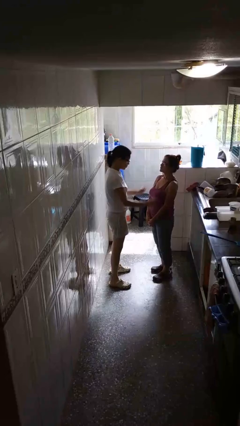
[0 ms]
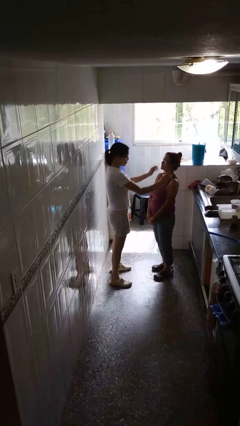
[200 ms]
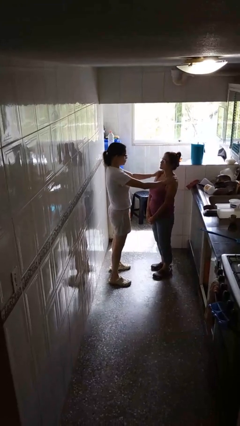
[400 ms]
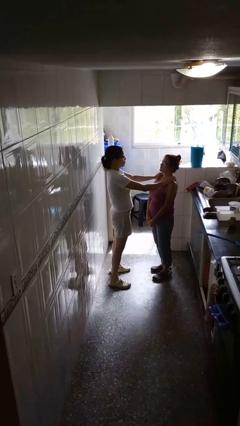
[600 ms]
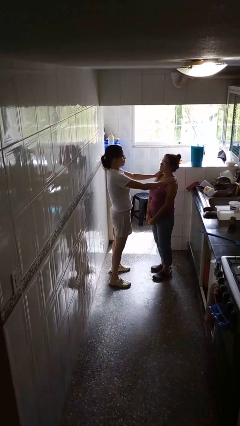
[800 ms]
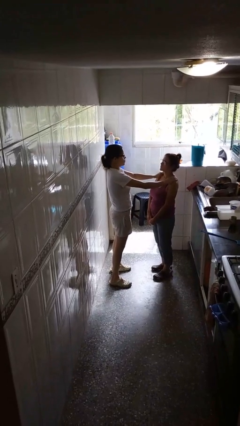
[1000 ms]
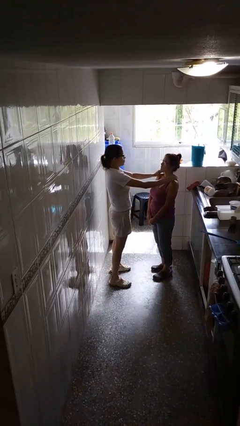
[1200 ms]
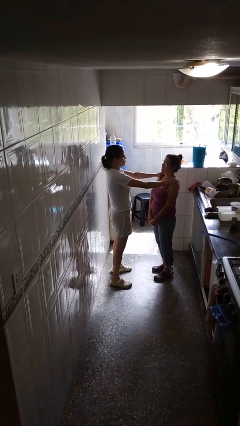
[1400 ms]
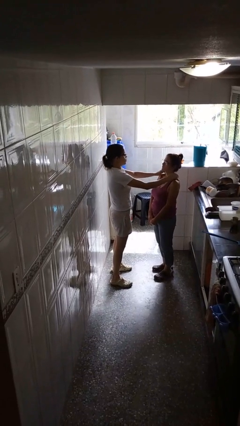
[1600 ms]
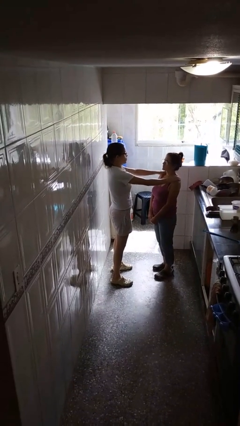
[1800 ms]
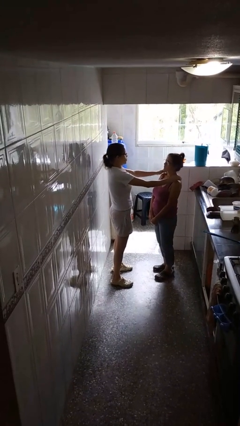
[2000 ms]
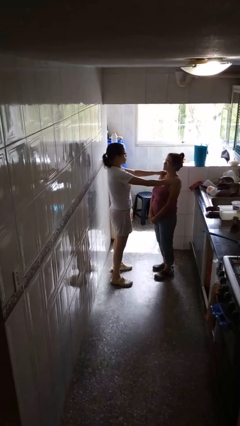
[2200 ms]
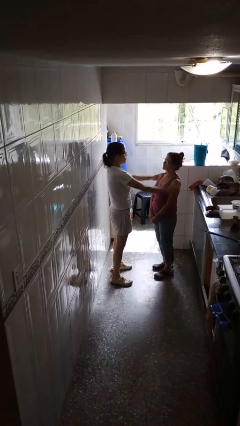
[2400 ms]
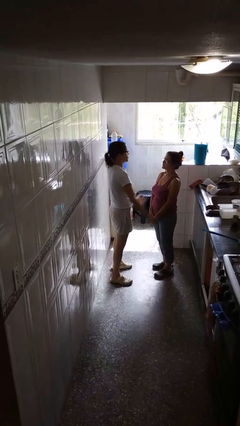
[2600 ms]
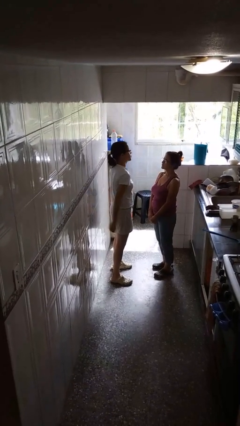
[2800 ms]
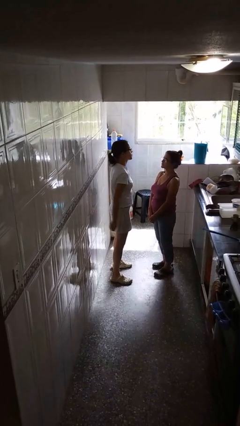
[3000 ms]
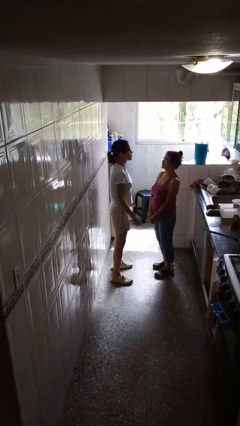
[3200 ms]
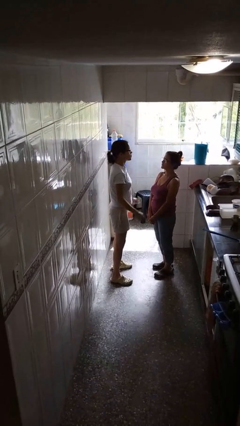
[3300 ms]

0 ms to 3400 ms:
person pounds shoulders of person

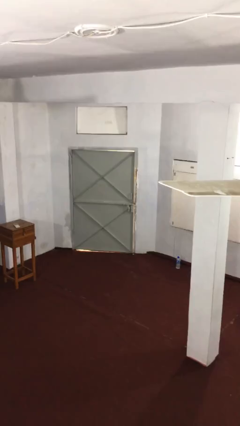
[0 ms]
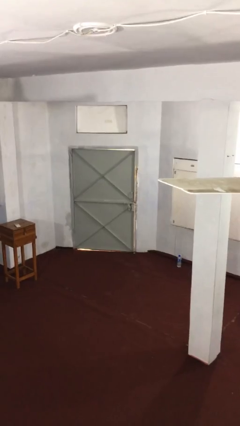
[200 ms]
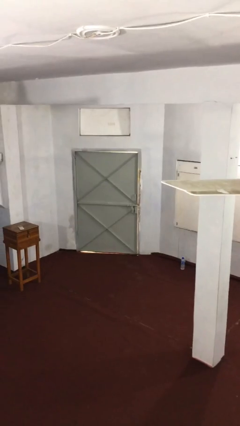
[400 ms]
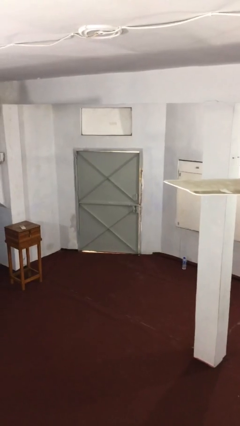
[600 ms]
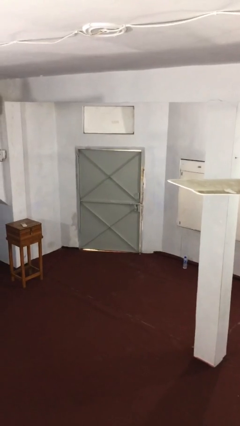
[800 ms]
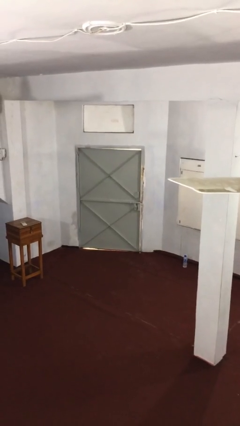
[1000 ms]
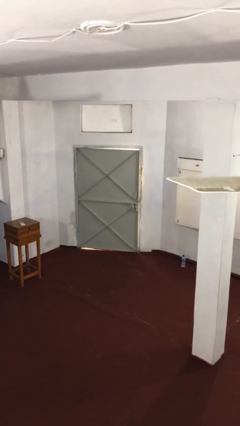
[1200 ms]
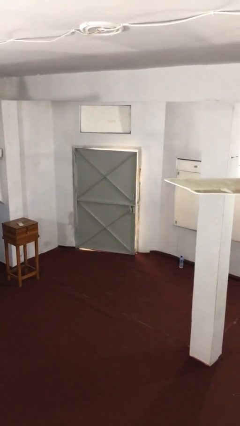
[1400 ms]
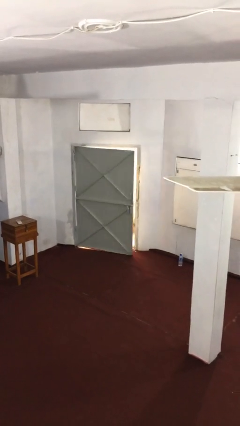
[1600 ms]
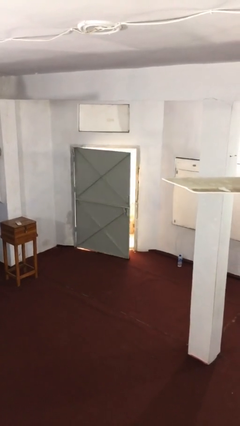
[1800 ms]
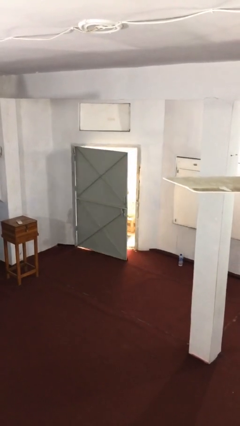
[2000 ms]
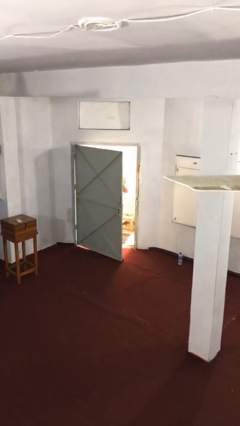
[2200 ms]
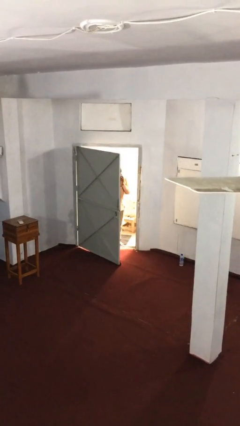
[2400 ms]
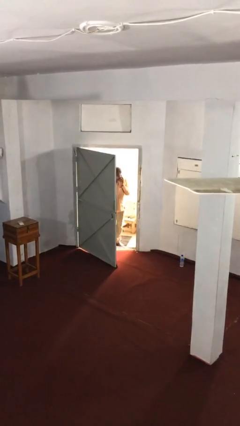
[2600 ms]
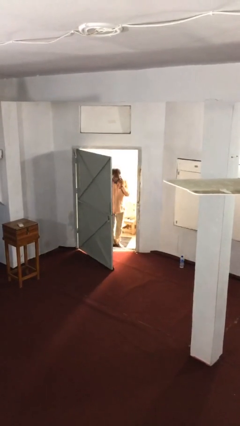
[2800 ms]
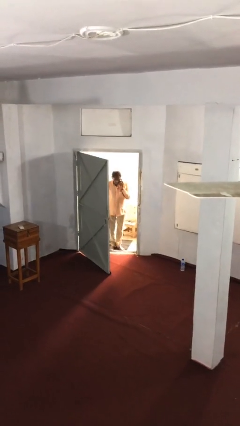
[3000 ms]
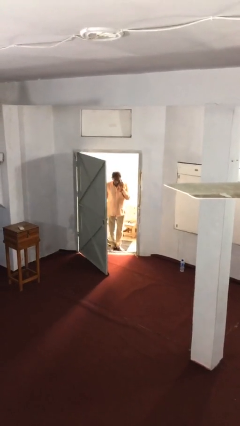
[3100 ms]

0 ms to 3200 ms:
person opens facility door

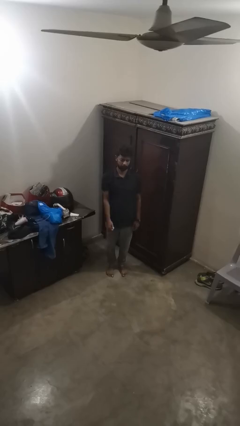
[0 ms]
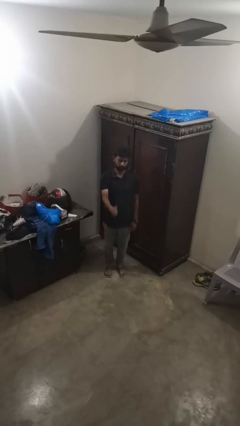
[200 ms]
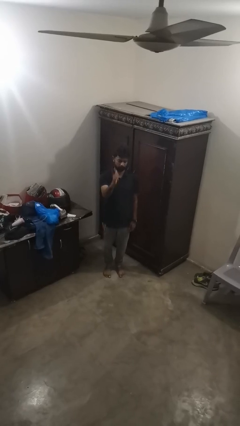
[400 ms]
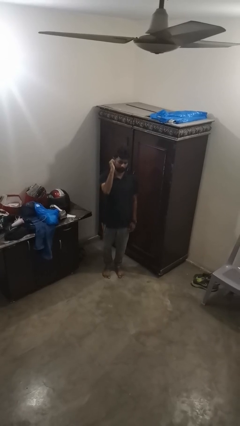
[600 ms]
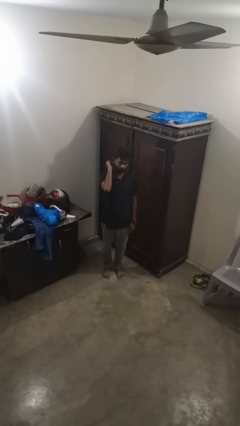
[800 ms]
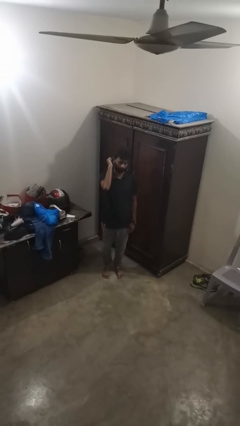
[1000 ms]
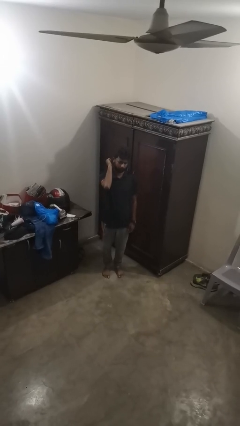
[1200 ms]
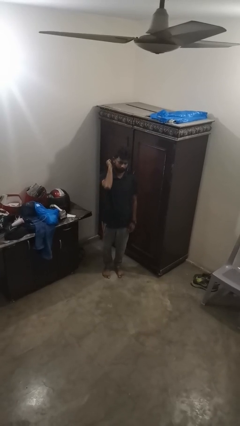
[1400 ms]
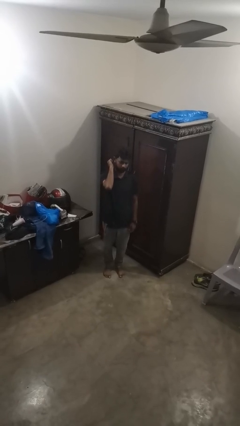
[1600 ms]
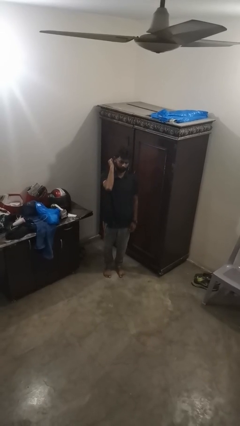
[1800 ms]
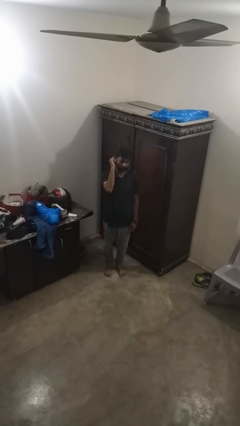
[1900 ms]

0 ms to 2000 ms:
person gestures behind me

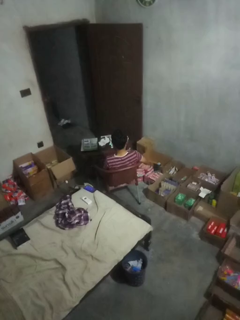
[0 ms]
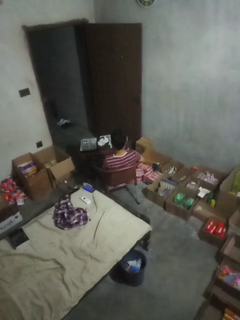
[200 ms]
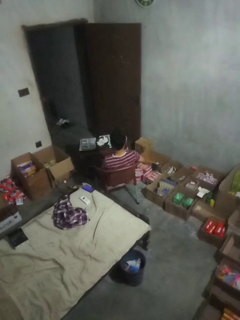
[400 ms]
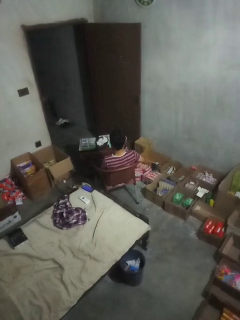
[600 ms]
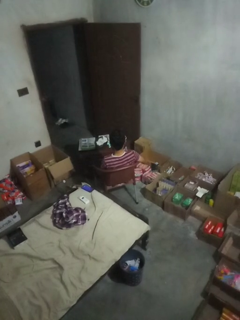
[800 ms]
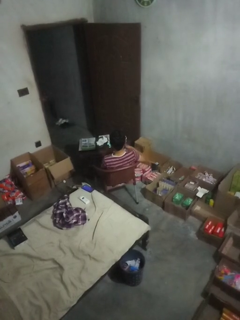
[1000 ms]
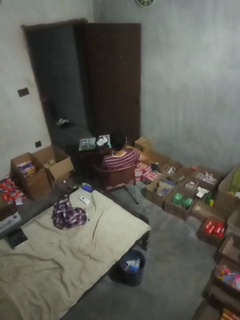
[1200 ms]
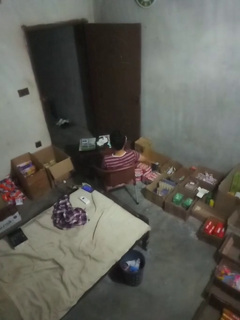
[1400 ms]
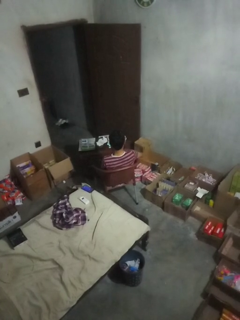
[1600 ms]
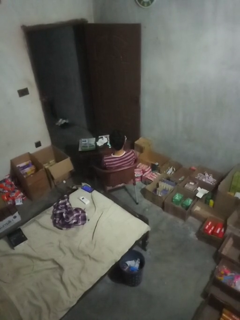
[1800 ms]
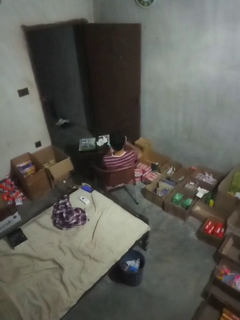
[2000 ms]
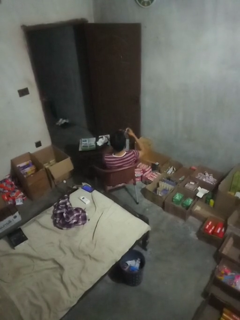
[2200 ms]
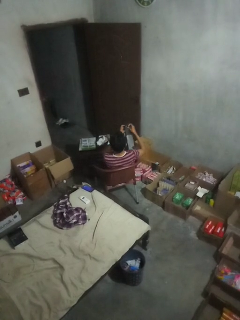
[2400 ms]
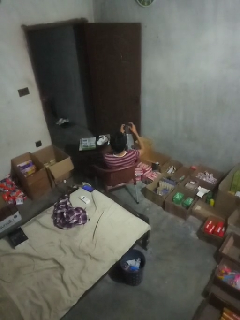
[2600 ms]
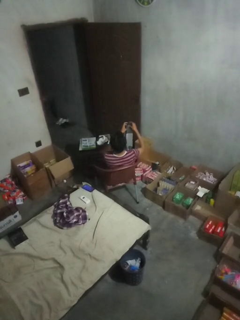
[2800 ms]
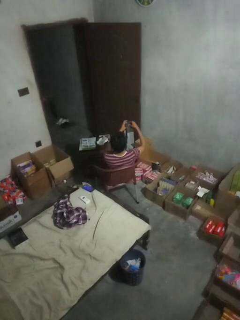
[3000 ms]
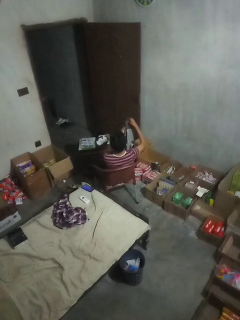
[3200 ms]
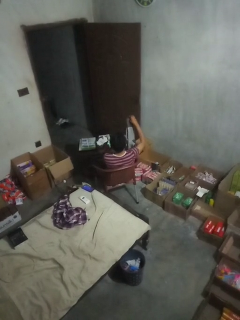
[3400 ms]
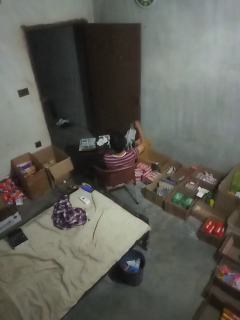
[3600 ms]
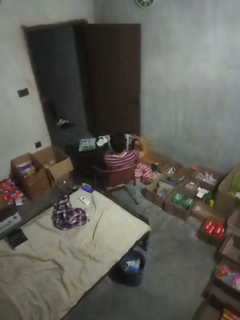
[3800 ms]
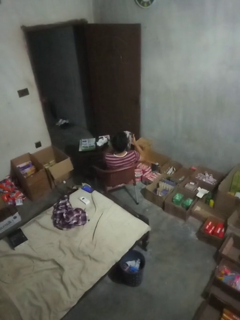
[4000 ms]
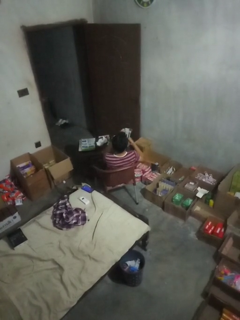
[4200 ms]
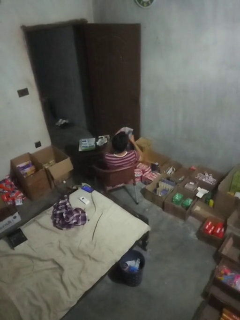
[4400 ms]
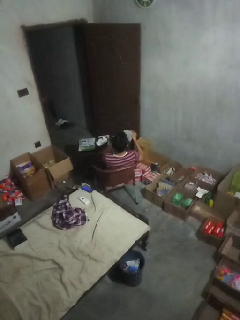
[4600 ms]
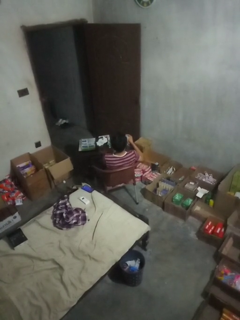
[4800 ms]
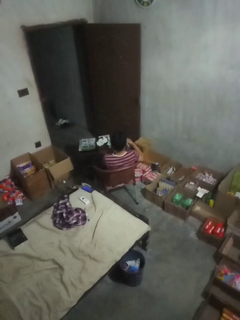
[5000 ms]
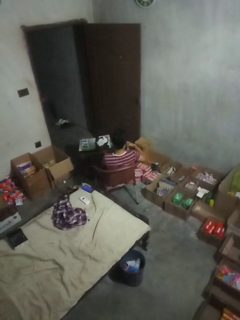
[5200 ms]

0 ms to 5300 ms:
person folds socks

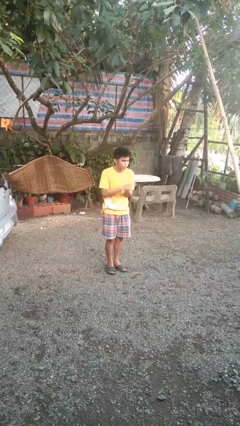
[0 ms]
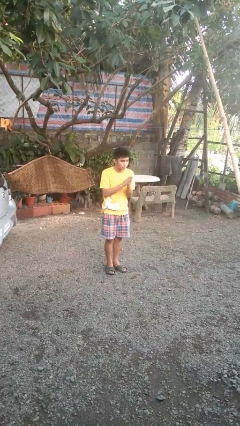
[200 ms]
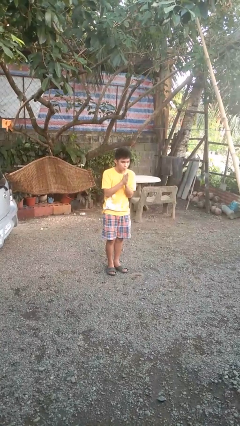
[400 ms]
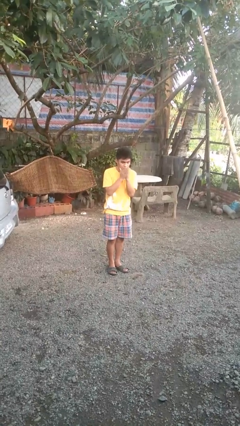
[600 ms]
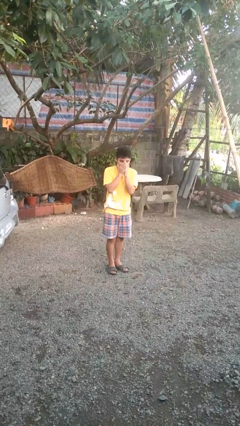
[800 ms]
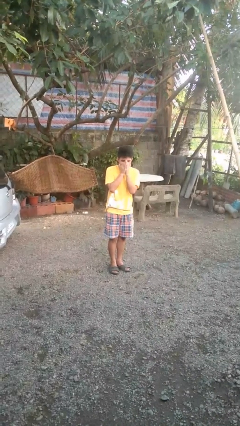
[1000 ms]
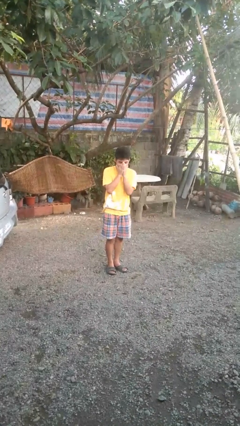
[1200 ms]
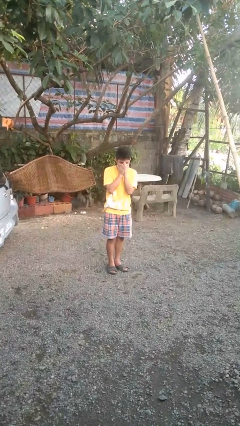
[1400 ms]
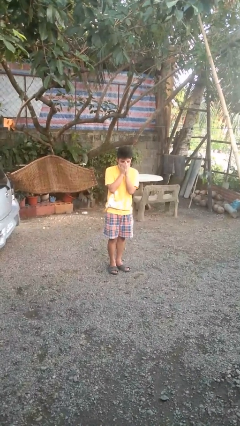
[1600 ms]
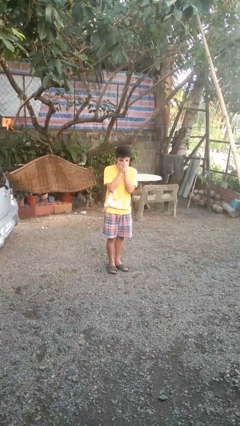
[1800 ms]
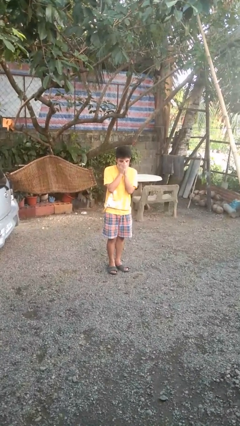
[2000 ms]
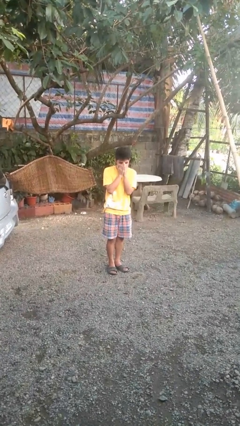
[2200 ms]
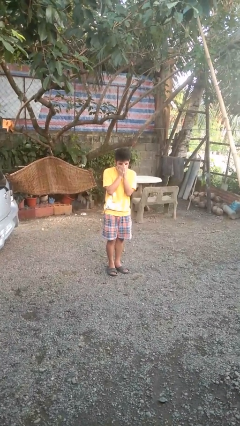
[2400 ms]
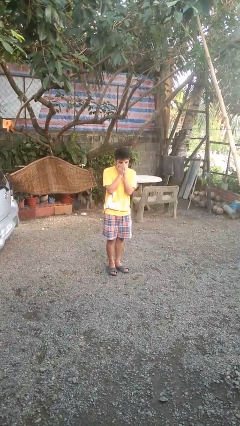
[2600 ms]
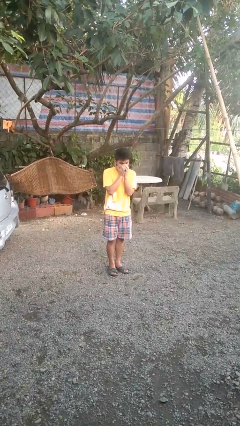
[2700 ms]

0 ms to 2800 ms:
person blows into hands

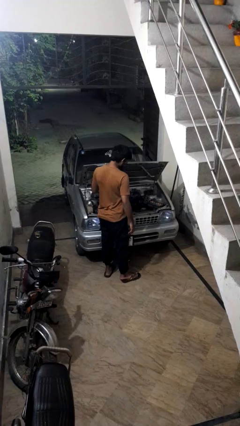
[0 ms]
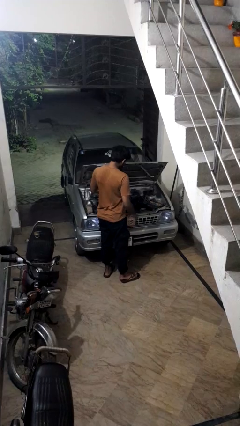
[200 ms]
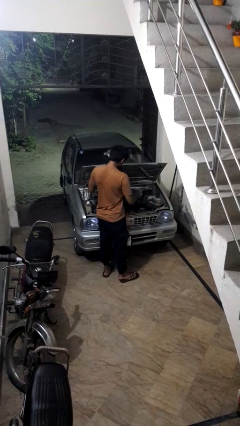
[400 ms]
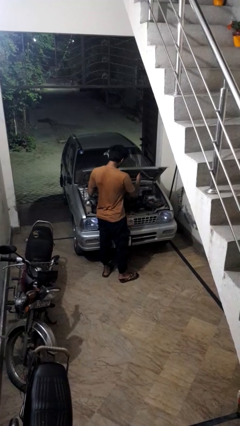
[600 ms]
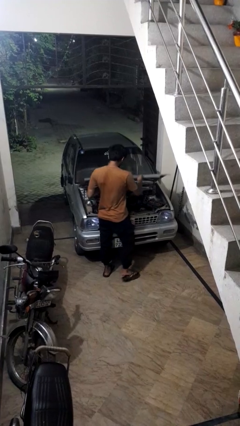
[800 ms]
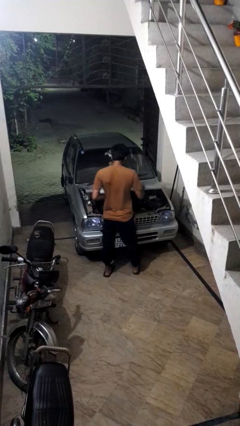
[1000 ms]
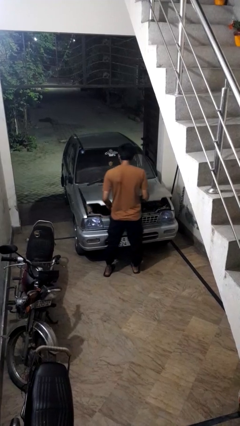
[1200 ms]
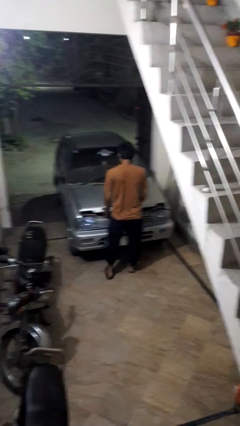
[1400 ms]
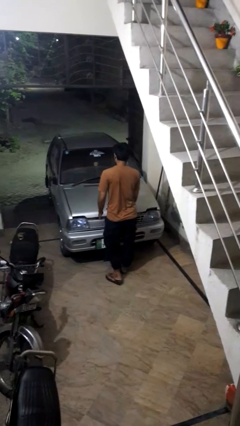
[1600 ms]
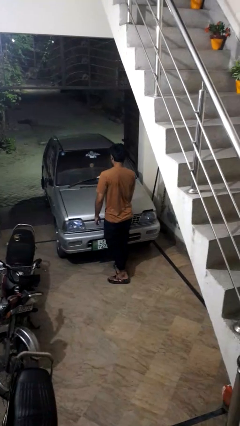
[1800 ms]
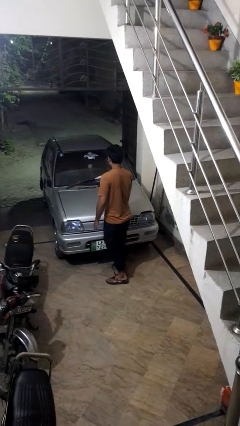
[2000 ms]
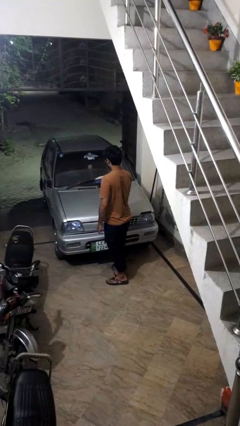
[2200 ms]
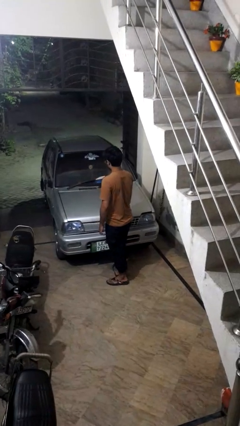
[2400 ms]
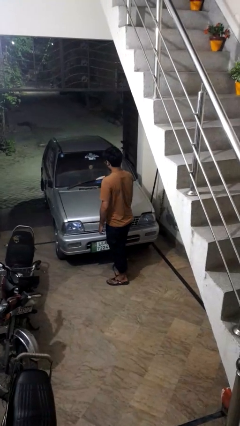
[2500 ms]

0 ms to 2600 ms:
person closes car hood
